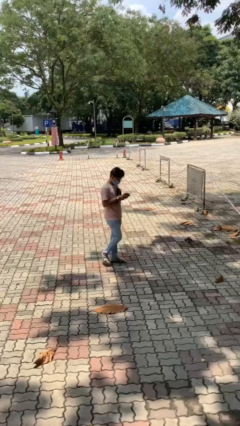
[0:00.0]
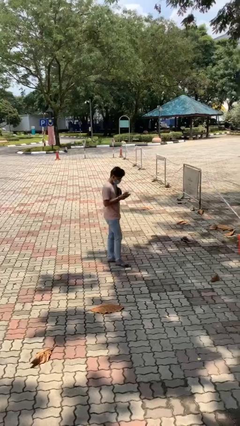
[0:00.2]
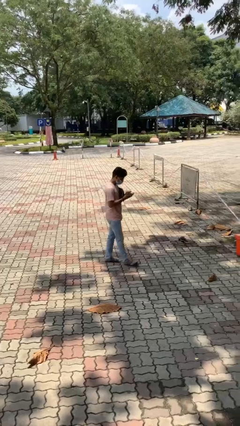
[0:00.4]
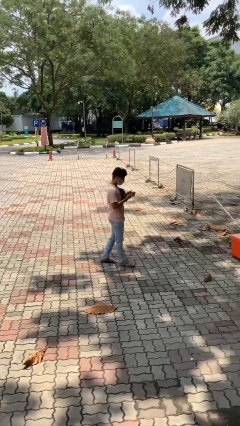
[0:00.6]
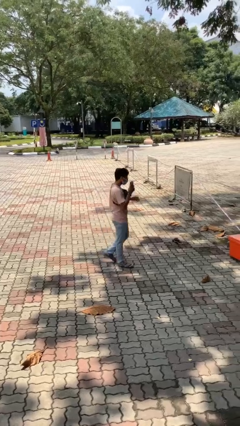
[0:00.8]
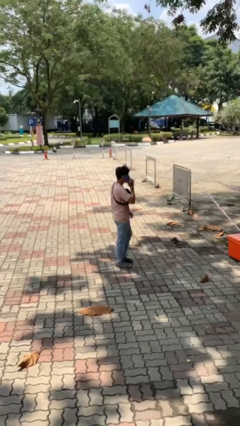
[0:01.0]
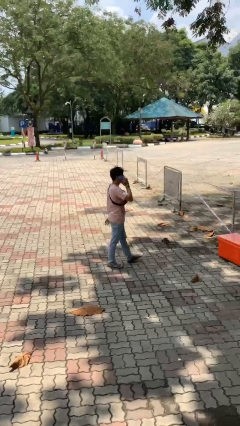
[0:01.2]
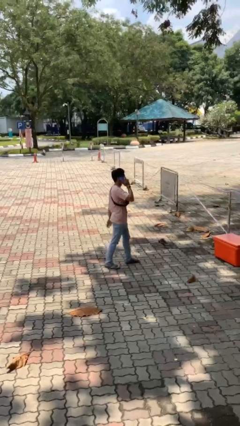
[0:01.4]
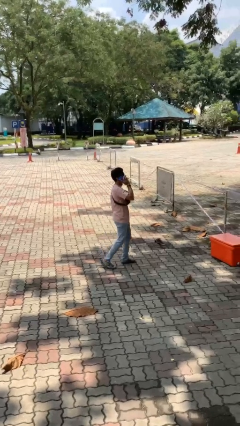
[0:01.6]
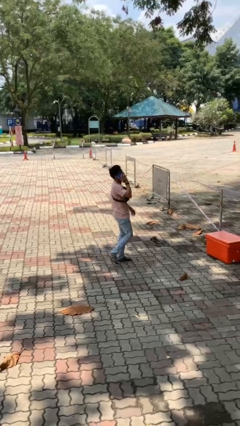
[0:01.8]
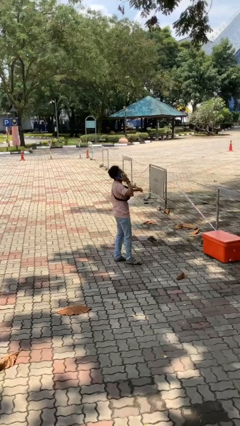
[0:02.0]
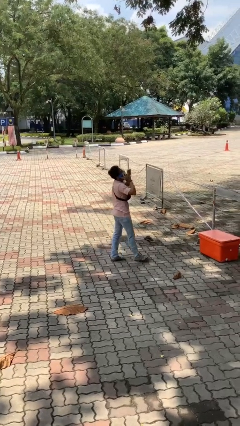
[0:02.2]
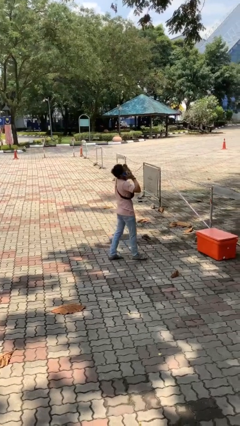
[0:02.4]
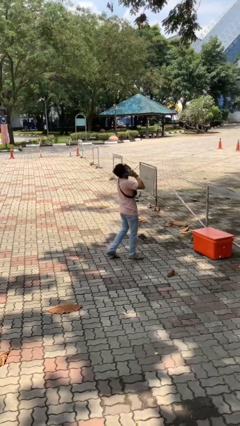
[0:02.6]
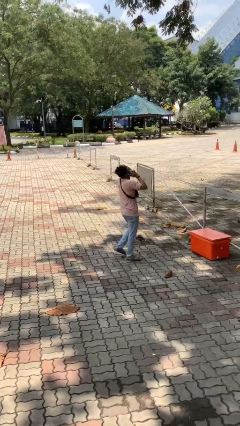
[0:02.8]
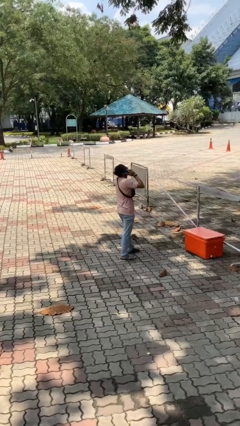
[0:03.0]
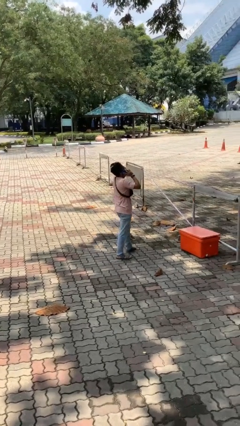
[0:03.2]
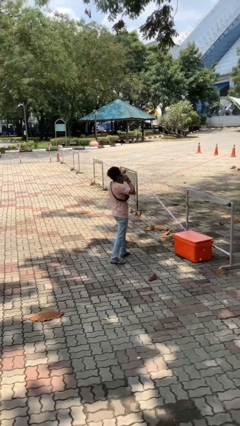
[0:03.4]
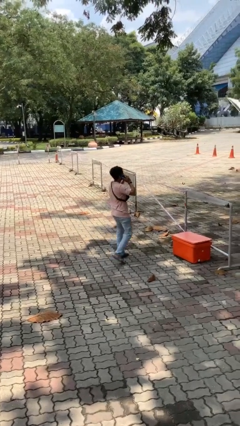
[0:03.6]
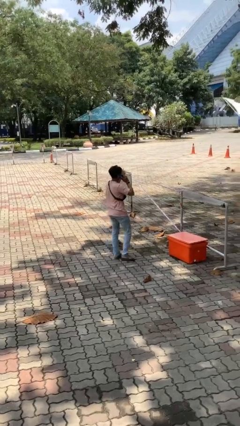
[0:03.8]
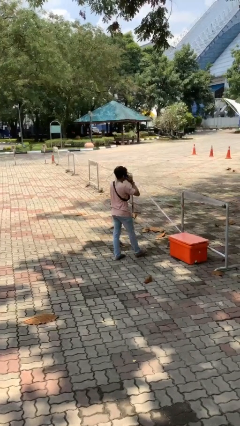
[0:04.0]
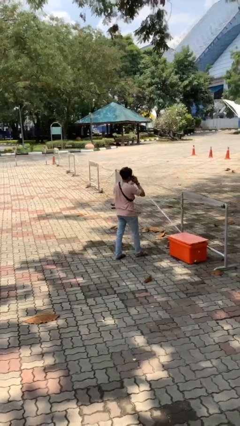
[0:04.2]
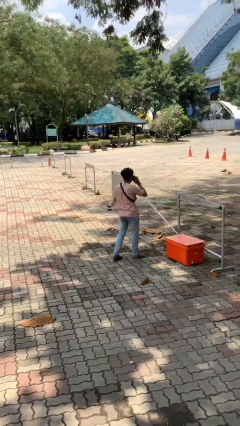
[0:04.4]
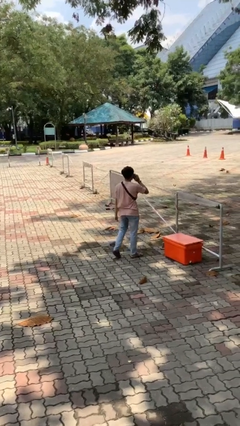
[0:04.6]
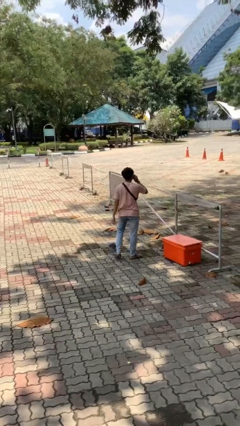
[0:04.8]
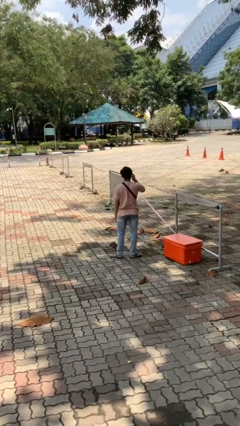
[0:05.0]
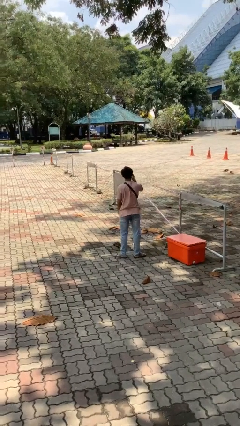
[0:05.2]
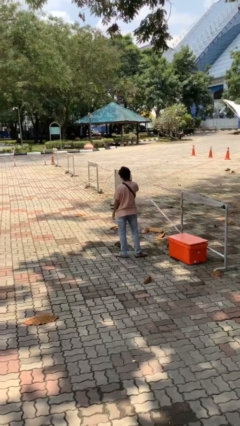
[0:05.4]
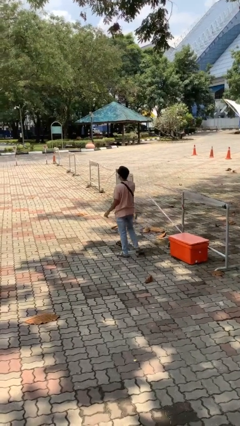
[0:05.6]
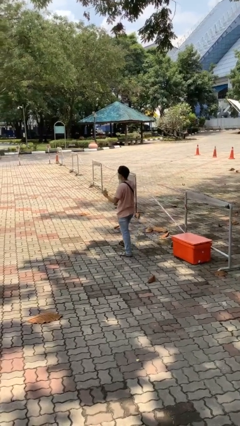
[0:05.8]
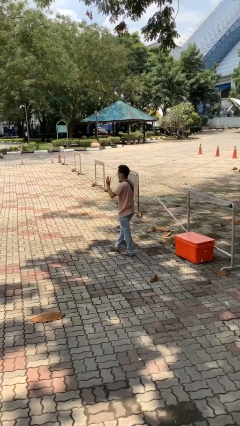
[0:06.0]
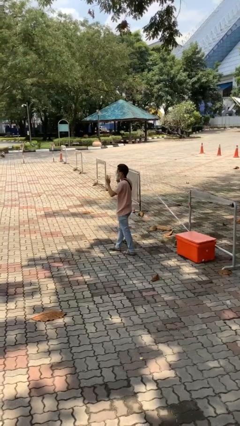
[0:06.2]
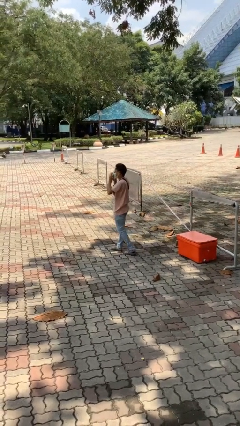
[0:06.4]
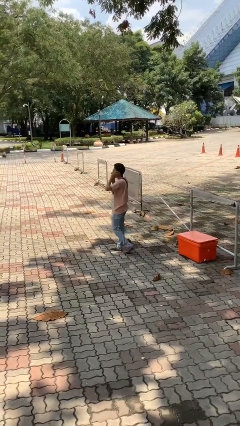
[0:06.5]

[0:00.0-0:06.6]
person talks on phone

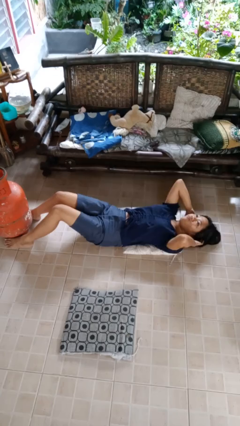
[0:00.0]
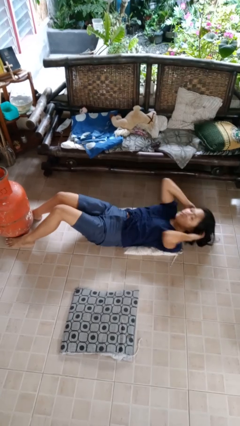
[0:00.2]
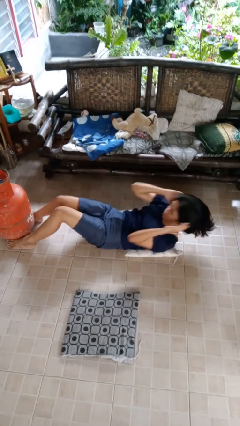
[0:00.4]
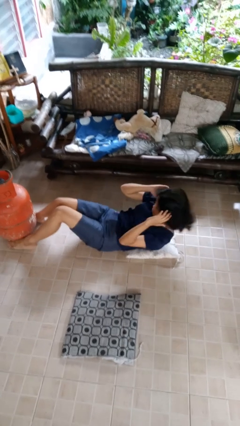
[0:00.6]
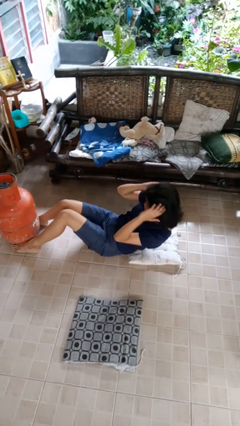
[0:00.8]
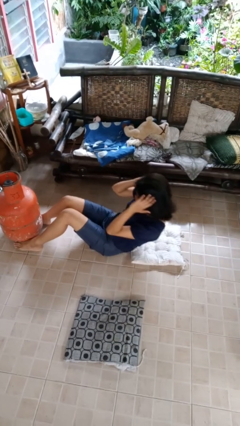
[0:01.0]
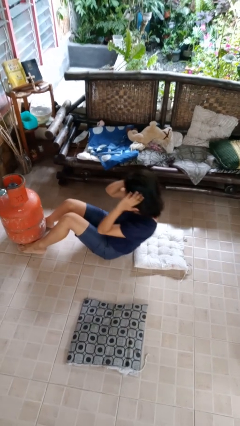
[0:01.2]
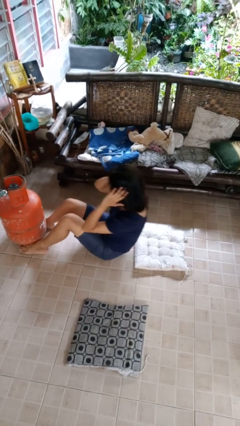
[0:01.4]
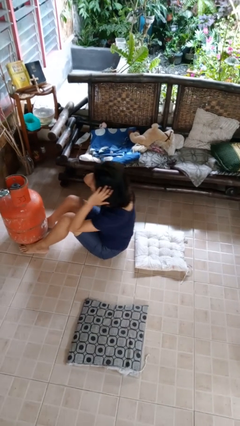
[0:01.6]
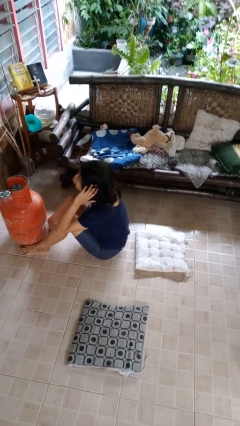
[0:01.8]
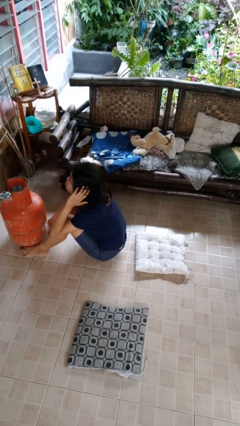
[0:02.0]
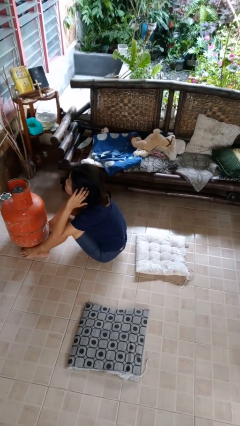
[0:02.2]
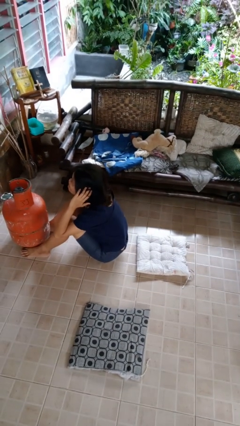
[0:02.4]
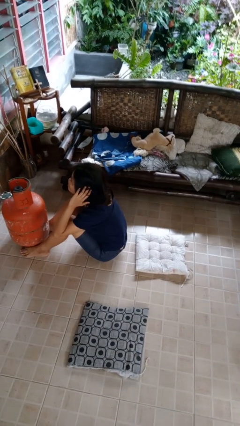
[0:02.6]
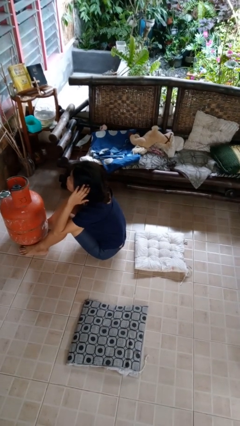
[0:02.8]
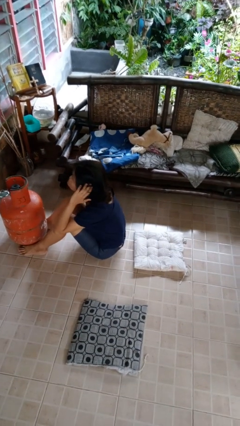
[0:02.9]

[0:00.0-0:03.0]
person exercises with situp

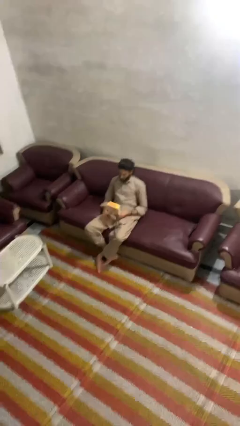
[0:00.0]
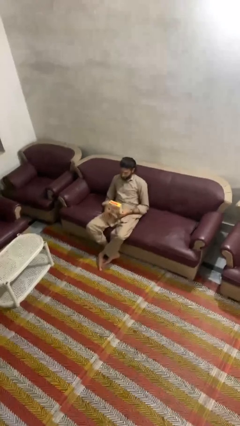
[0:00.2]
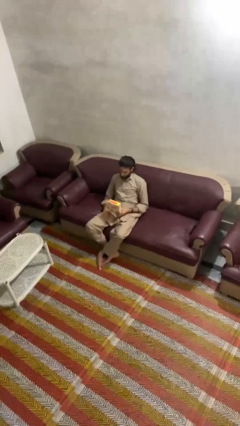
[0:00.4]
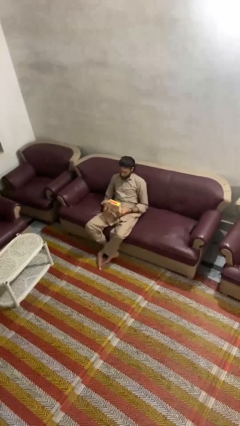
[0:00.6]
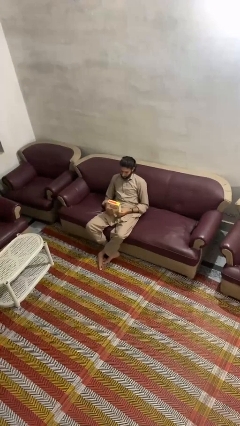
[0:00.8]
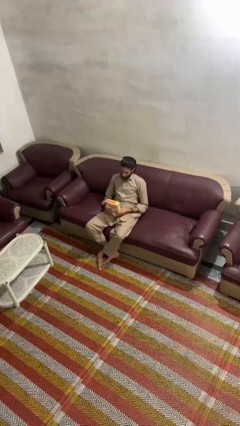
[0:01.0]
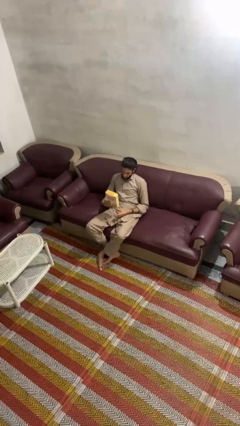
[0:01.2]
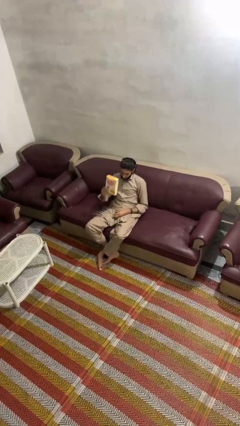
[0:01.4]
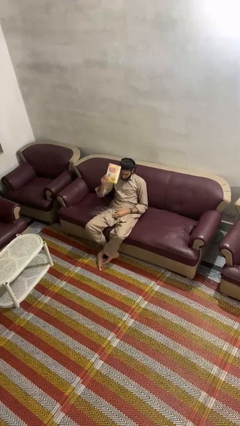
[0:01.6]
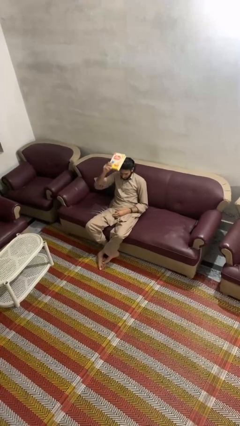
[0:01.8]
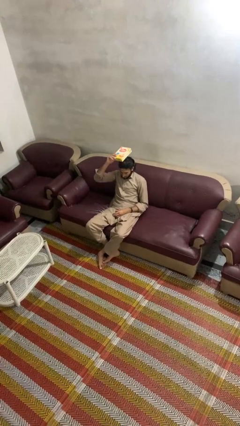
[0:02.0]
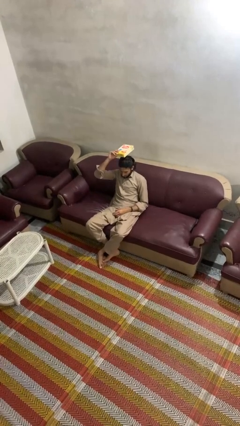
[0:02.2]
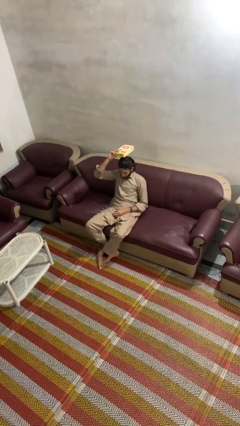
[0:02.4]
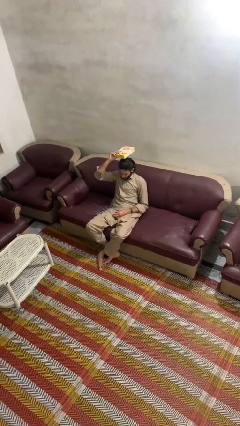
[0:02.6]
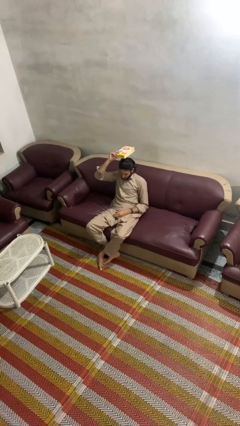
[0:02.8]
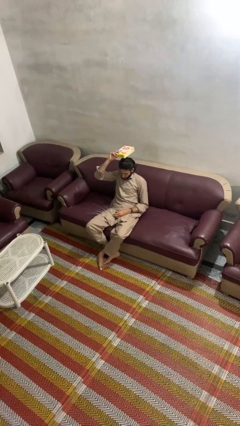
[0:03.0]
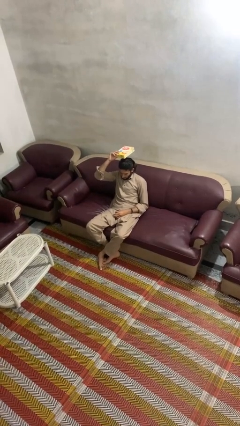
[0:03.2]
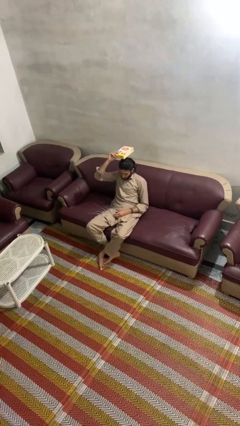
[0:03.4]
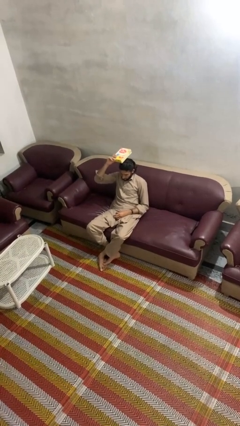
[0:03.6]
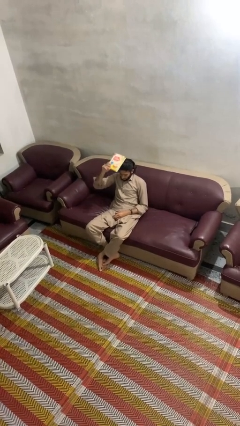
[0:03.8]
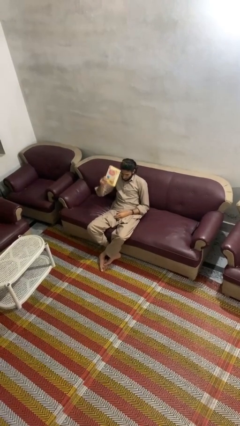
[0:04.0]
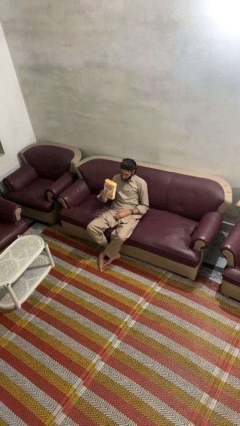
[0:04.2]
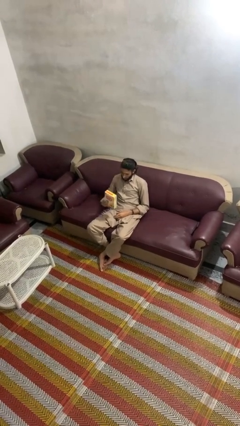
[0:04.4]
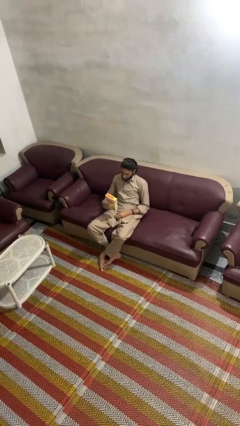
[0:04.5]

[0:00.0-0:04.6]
person holds object above head

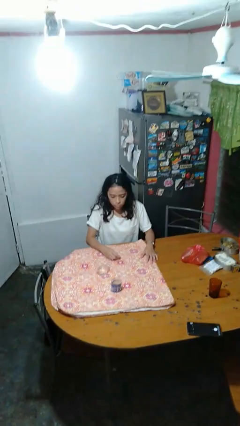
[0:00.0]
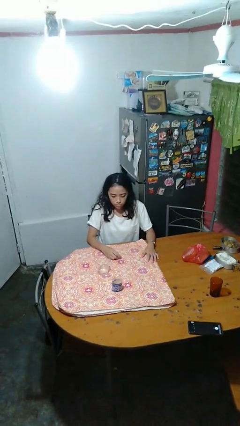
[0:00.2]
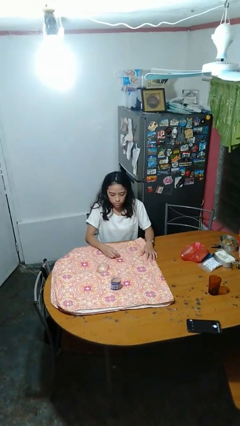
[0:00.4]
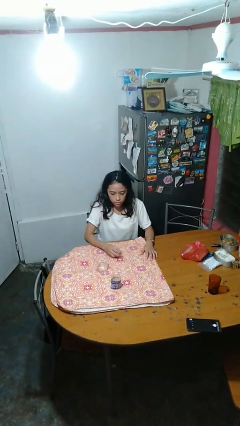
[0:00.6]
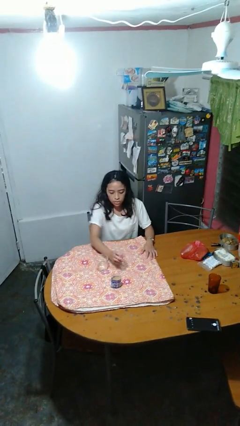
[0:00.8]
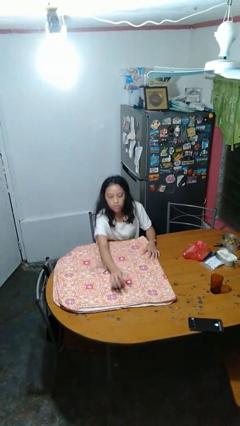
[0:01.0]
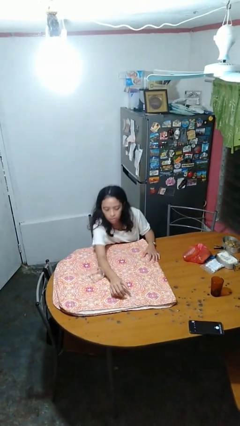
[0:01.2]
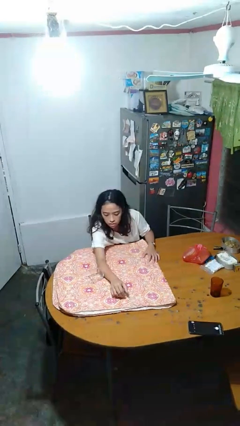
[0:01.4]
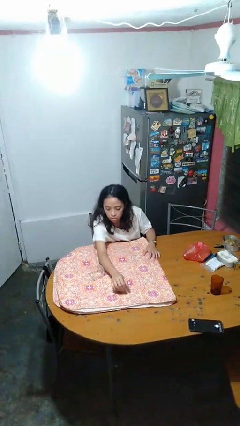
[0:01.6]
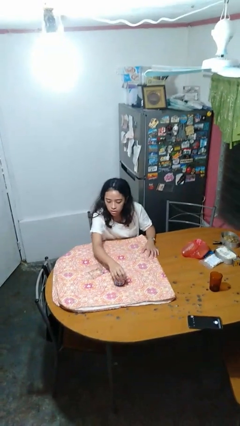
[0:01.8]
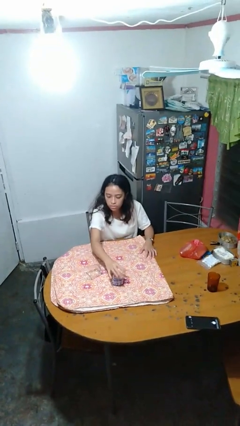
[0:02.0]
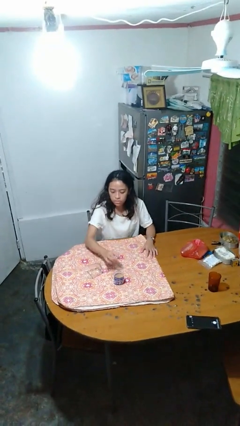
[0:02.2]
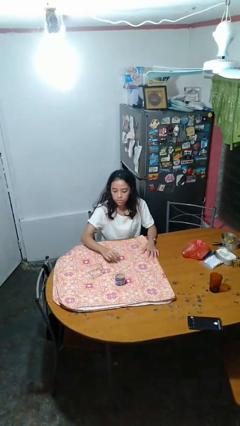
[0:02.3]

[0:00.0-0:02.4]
person knocks over glass

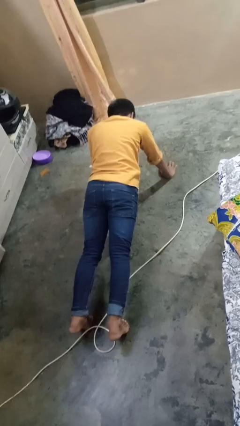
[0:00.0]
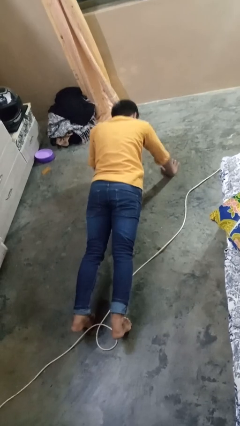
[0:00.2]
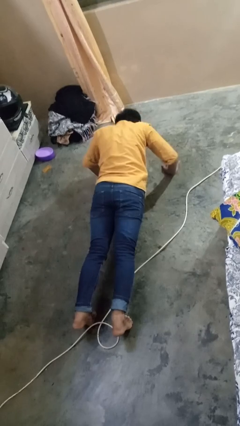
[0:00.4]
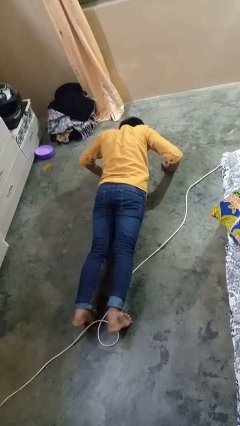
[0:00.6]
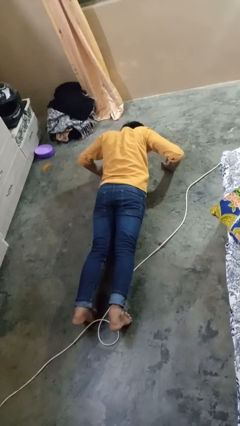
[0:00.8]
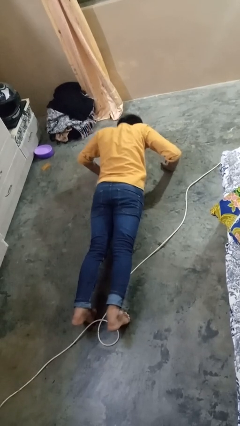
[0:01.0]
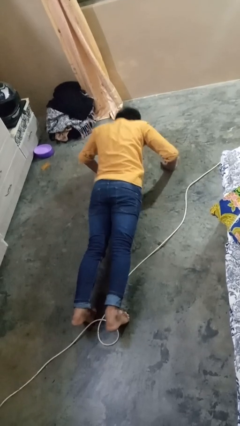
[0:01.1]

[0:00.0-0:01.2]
person exercises with pushup
